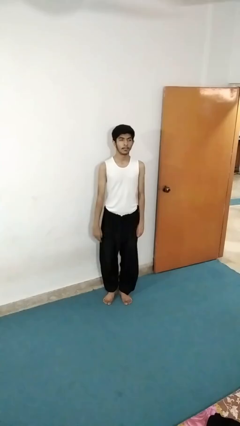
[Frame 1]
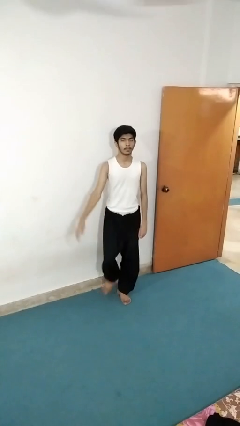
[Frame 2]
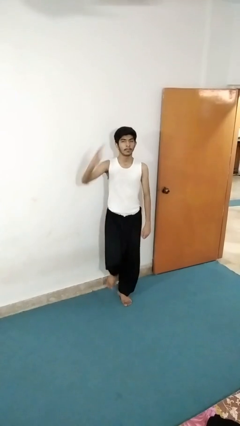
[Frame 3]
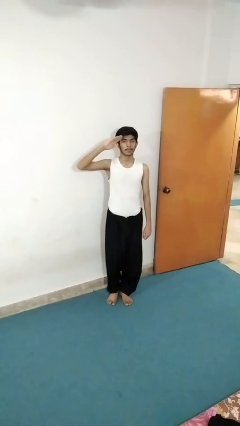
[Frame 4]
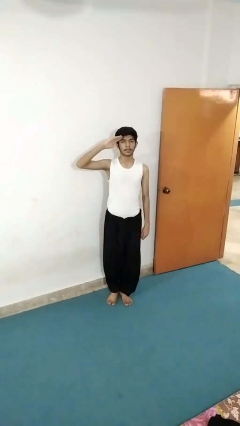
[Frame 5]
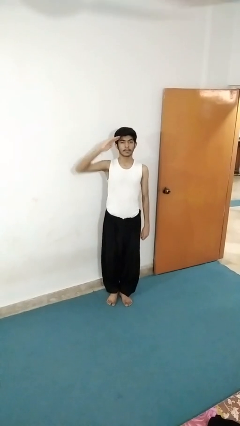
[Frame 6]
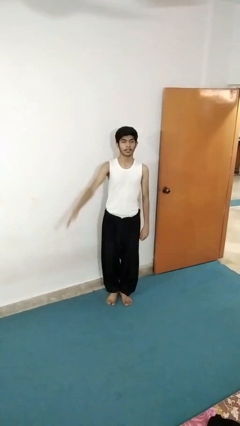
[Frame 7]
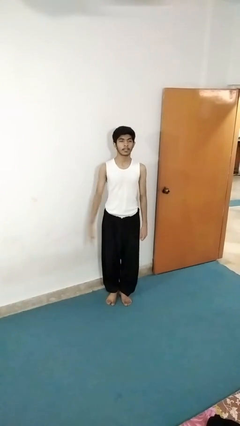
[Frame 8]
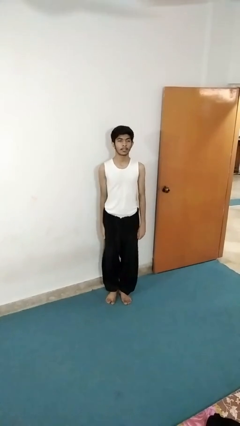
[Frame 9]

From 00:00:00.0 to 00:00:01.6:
person salutes

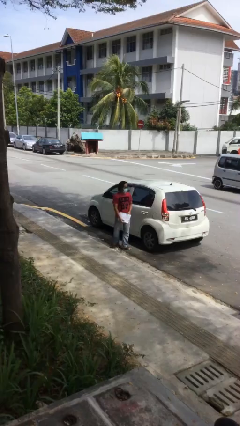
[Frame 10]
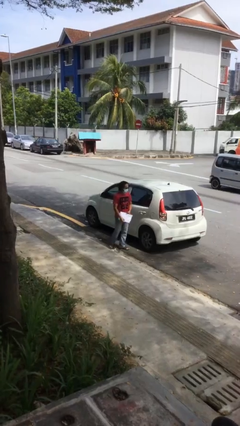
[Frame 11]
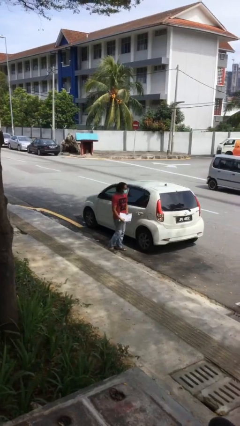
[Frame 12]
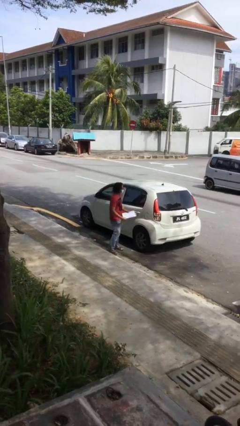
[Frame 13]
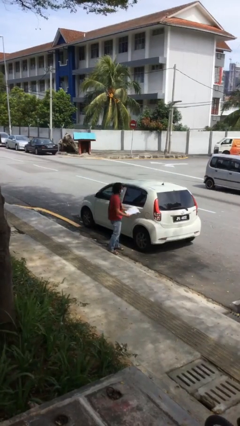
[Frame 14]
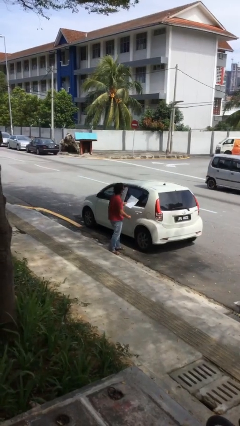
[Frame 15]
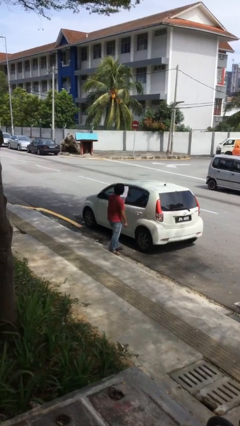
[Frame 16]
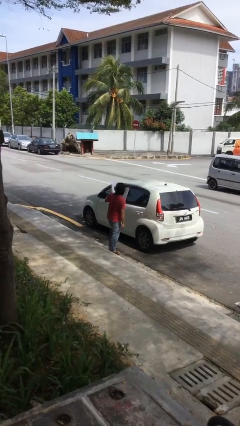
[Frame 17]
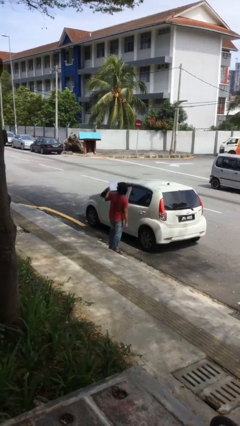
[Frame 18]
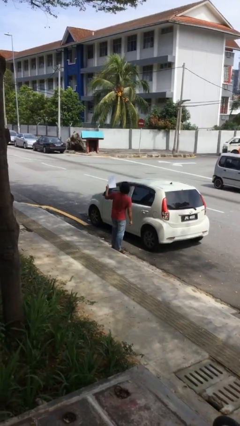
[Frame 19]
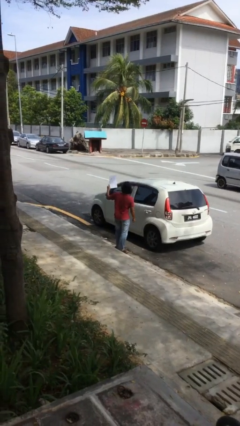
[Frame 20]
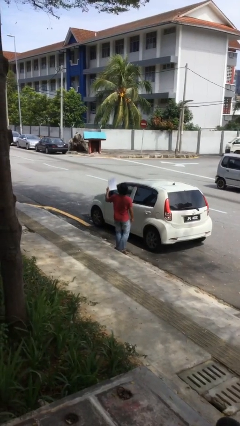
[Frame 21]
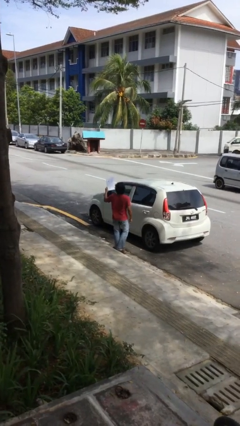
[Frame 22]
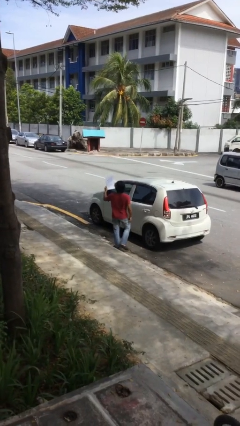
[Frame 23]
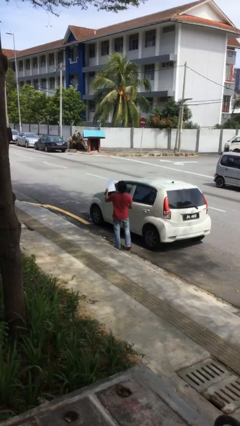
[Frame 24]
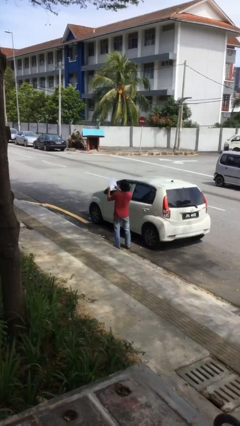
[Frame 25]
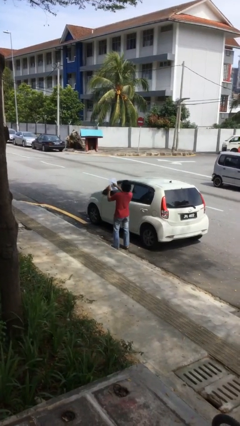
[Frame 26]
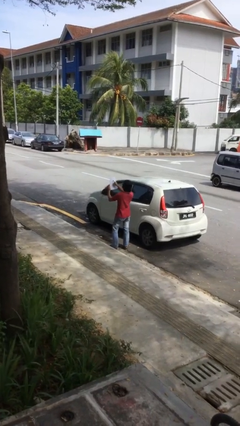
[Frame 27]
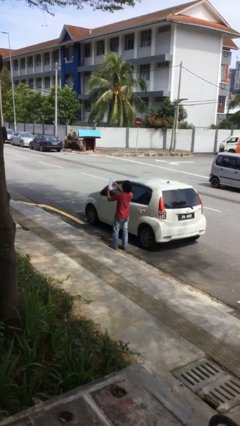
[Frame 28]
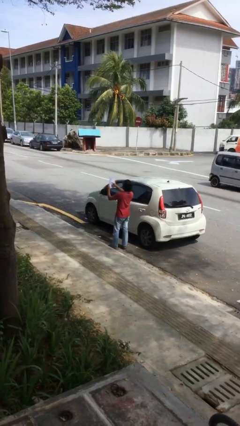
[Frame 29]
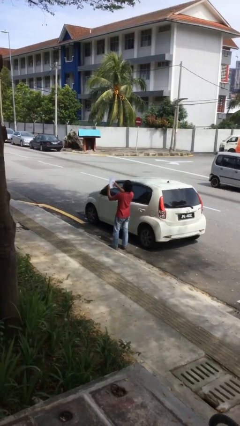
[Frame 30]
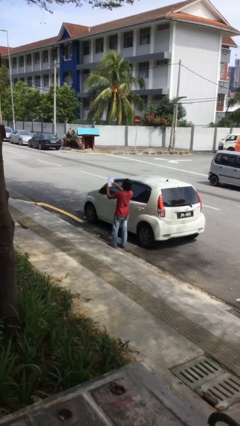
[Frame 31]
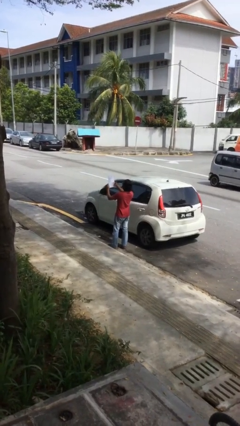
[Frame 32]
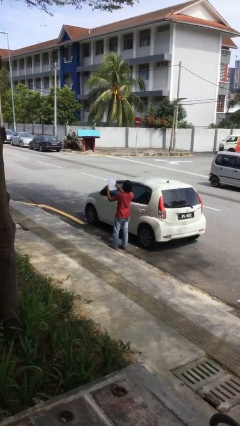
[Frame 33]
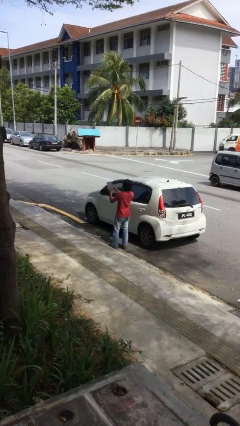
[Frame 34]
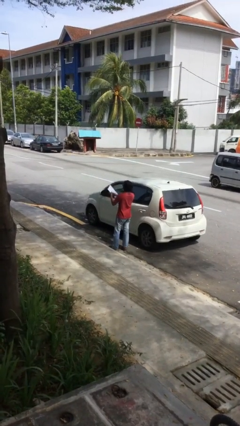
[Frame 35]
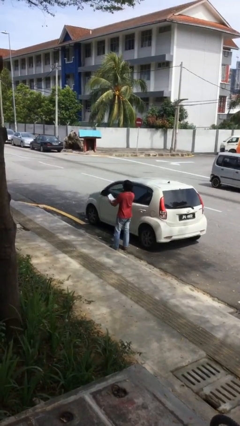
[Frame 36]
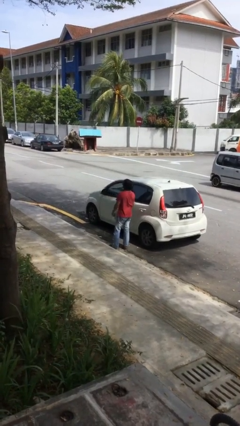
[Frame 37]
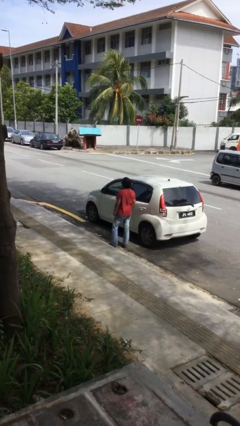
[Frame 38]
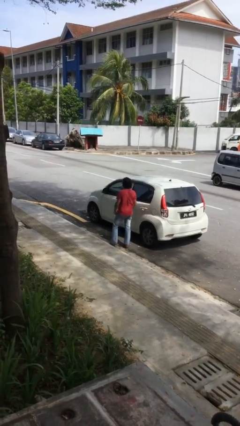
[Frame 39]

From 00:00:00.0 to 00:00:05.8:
person reads document

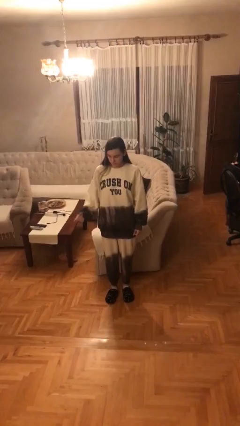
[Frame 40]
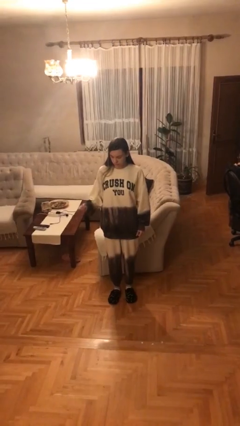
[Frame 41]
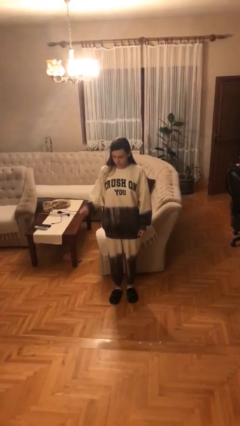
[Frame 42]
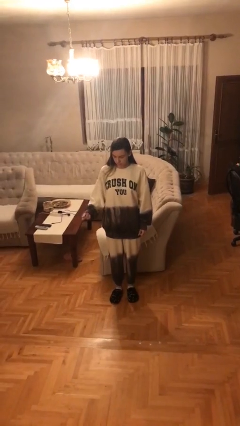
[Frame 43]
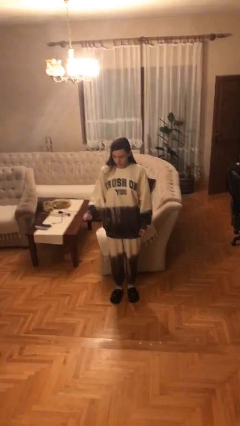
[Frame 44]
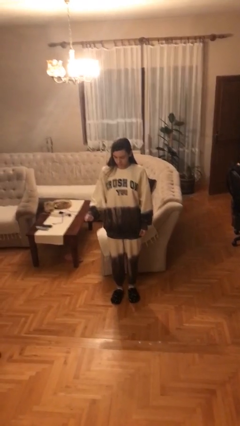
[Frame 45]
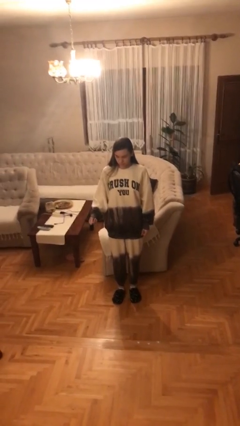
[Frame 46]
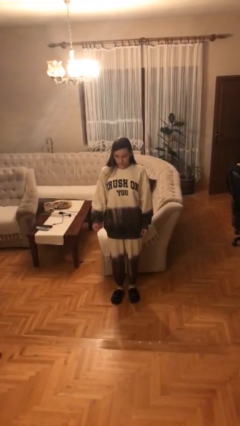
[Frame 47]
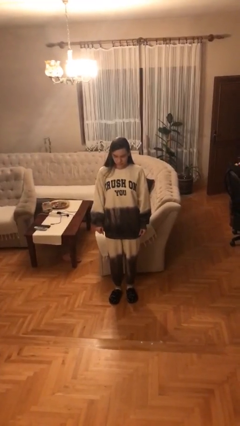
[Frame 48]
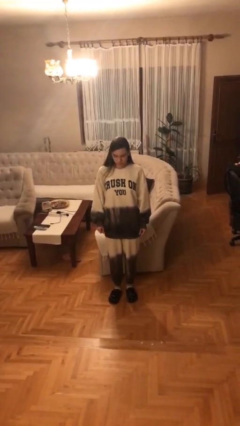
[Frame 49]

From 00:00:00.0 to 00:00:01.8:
person snaps fingers

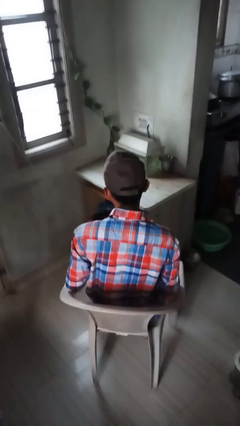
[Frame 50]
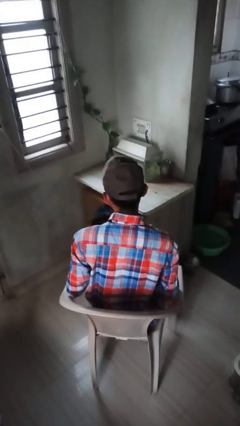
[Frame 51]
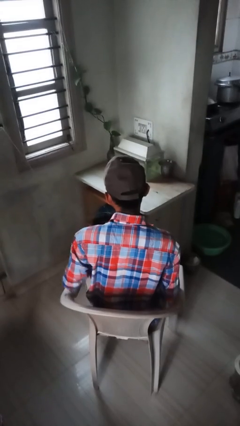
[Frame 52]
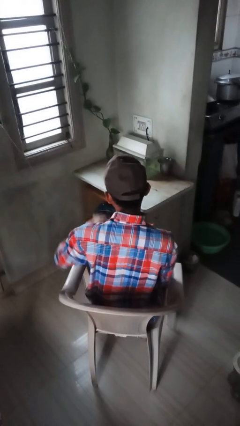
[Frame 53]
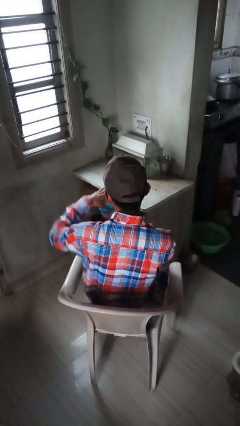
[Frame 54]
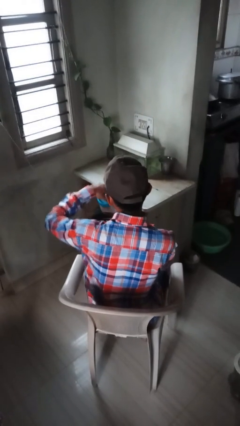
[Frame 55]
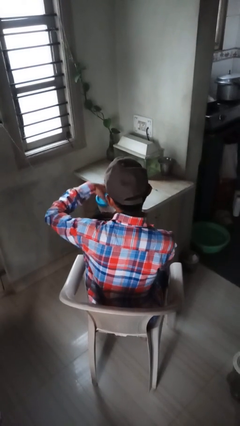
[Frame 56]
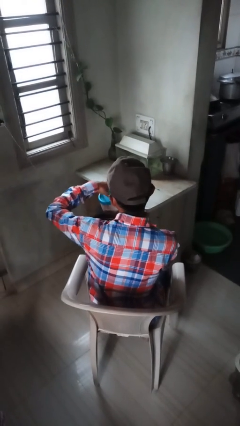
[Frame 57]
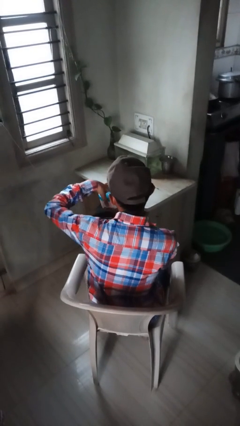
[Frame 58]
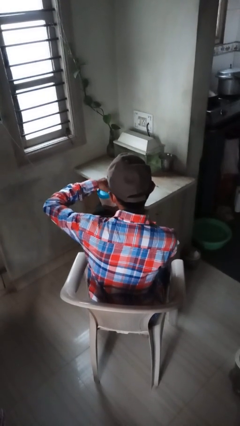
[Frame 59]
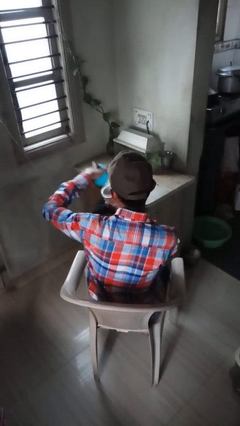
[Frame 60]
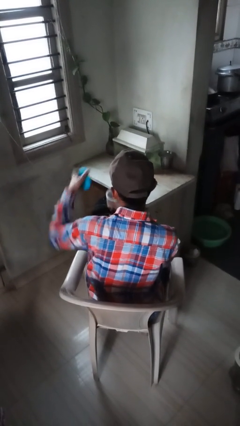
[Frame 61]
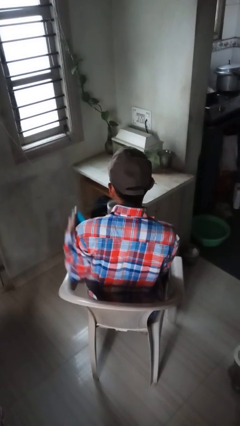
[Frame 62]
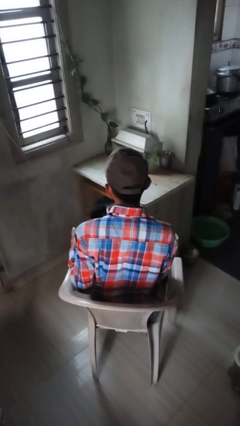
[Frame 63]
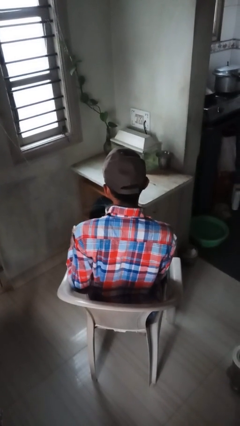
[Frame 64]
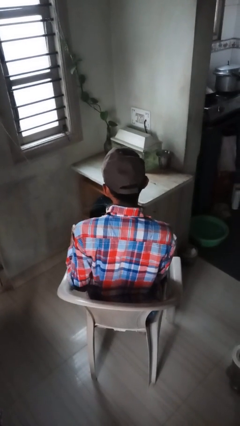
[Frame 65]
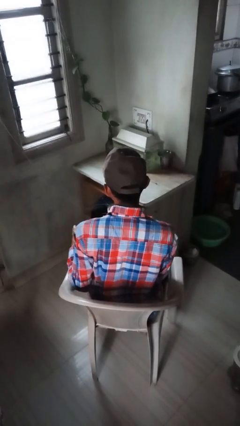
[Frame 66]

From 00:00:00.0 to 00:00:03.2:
person opens jar

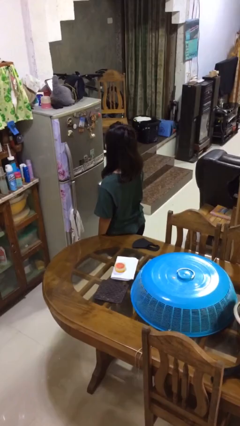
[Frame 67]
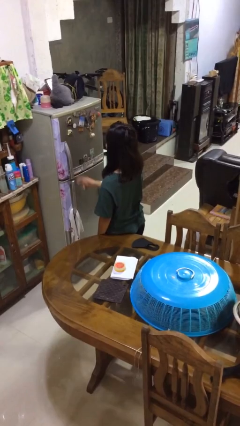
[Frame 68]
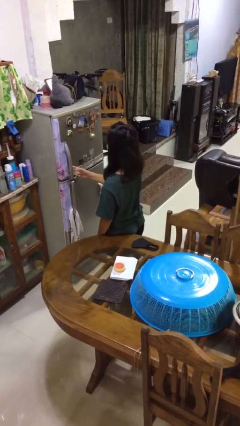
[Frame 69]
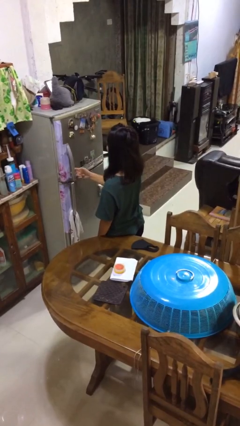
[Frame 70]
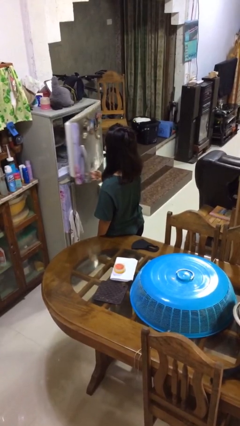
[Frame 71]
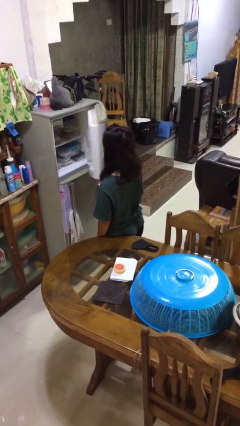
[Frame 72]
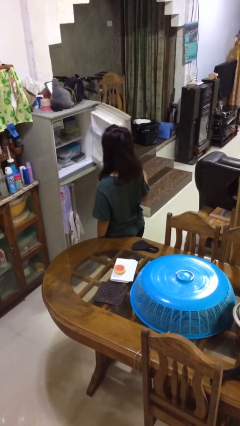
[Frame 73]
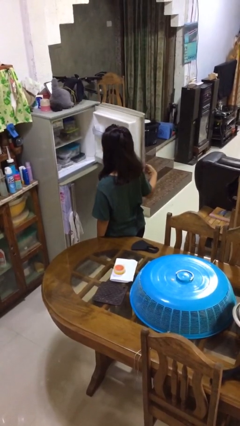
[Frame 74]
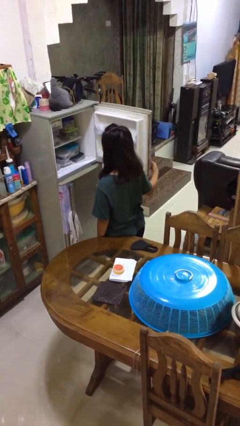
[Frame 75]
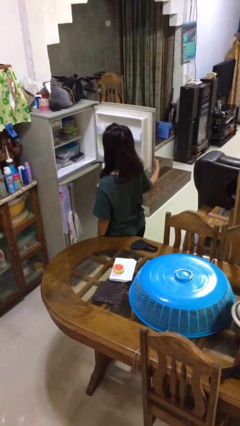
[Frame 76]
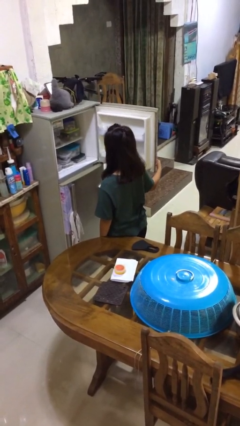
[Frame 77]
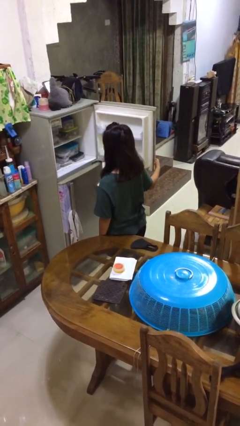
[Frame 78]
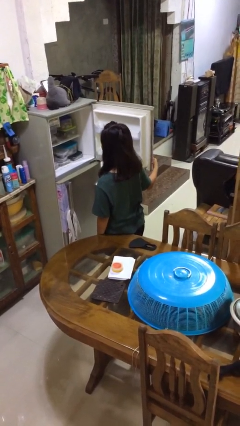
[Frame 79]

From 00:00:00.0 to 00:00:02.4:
person opens refrigerator

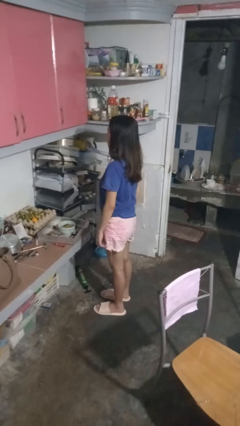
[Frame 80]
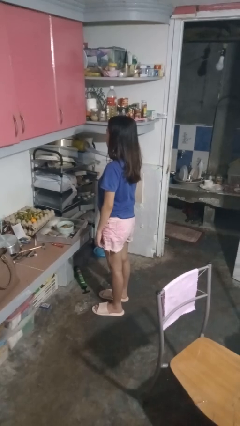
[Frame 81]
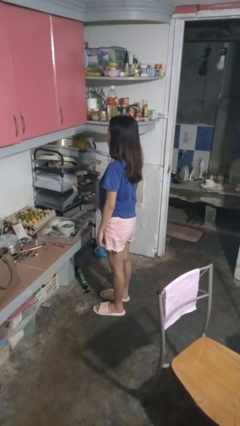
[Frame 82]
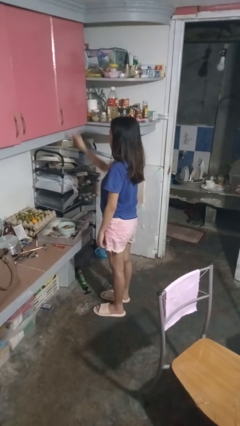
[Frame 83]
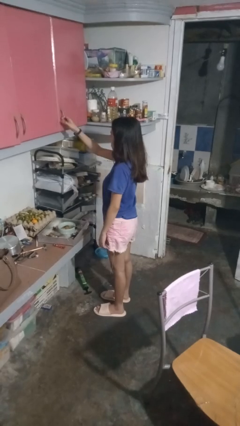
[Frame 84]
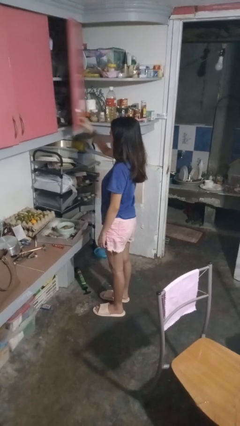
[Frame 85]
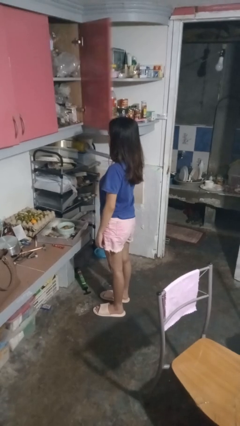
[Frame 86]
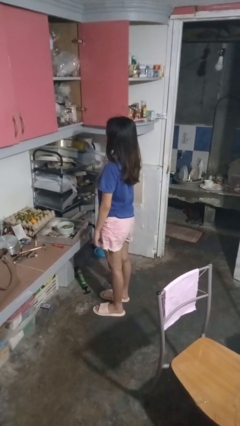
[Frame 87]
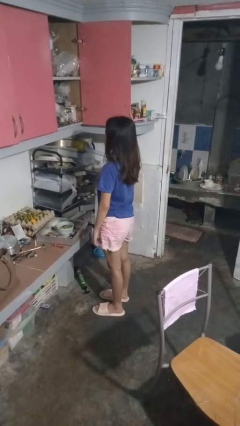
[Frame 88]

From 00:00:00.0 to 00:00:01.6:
person opens cabinet

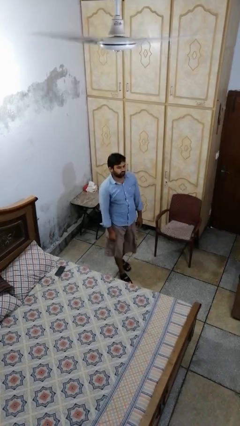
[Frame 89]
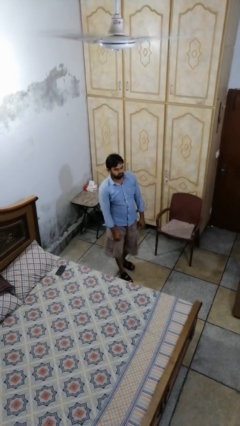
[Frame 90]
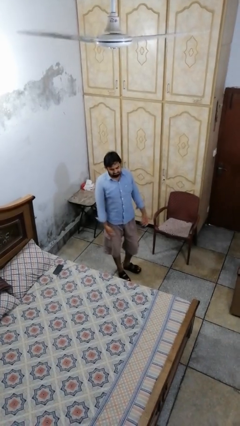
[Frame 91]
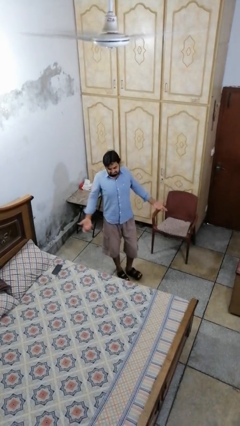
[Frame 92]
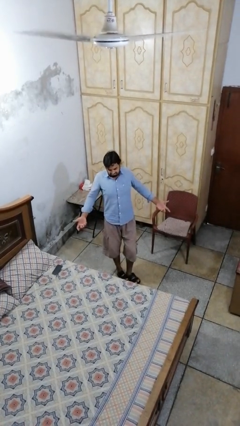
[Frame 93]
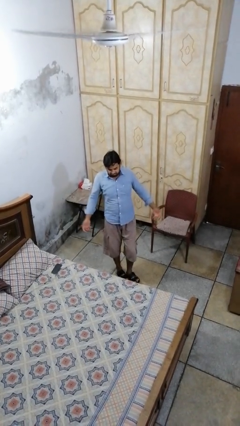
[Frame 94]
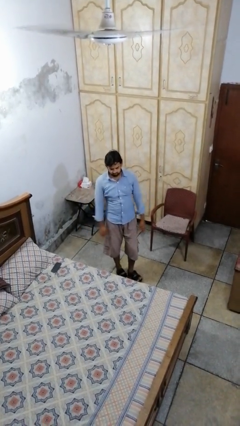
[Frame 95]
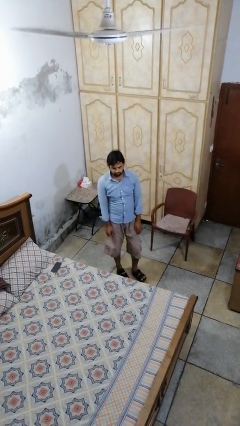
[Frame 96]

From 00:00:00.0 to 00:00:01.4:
person shrugs
